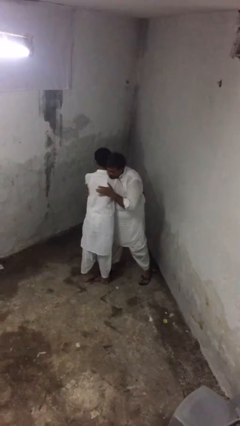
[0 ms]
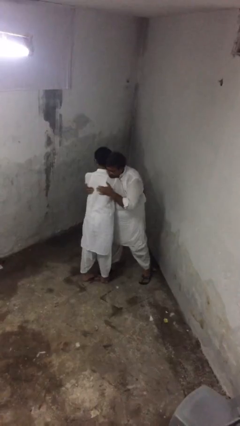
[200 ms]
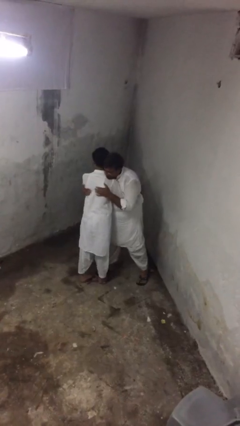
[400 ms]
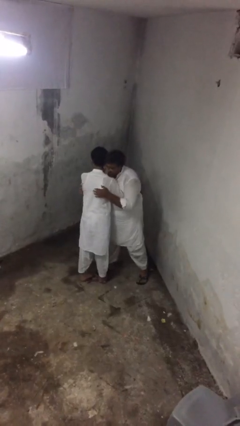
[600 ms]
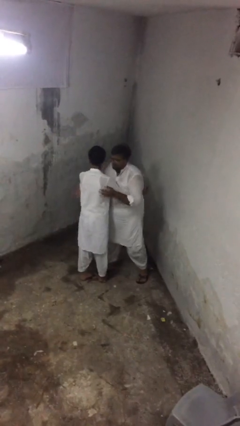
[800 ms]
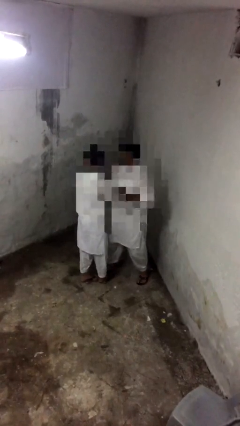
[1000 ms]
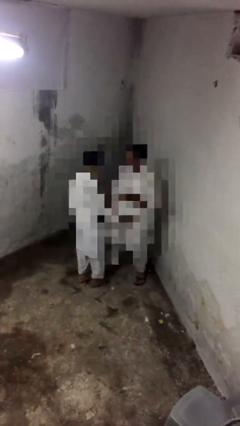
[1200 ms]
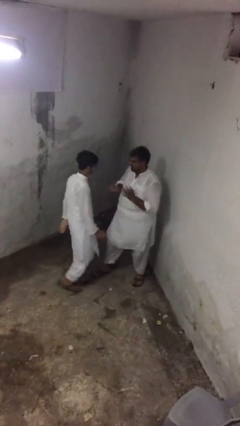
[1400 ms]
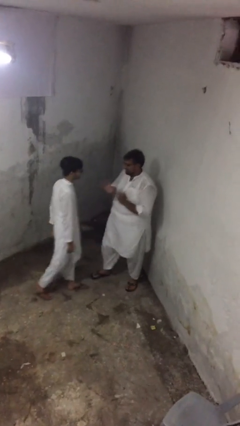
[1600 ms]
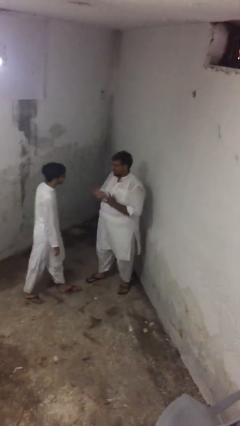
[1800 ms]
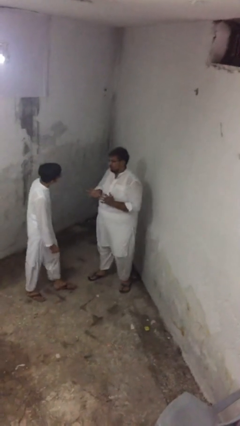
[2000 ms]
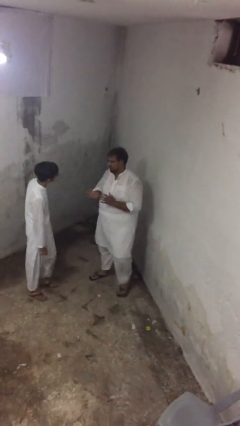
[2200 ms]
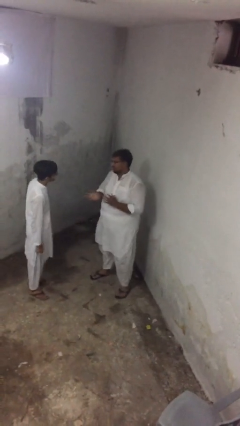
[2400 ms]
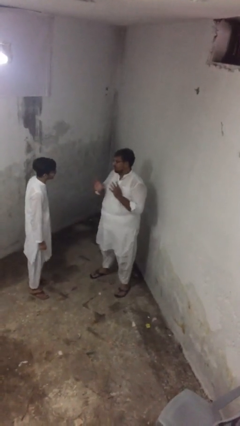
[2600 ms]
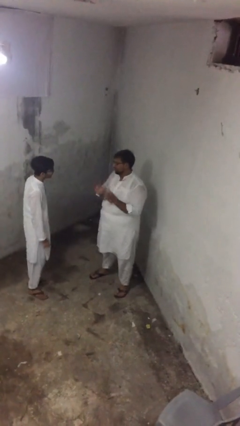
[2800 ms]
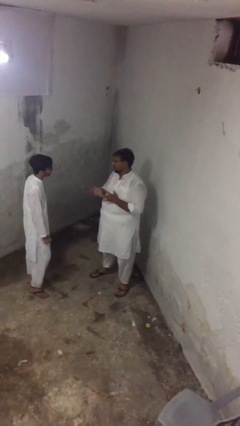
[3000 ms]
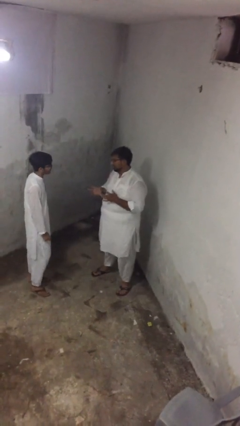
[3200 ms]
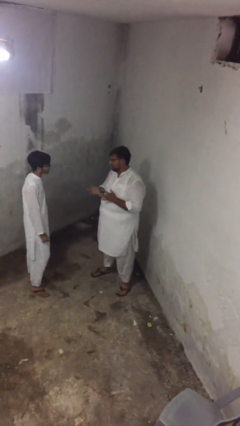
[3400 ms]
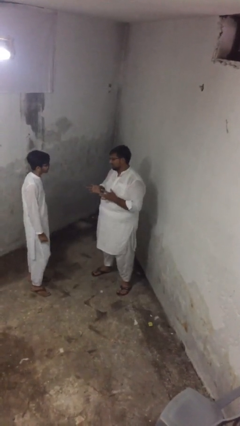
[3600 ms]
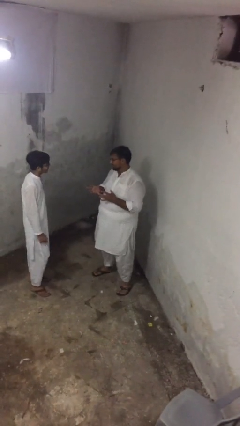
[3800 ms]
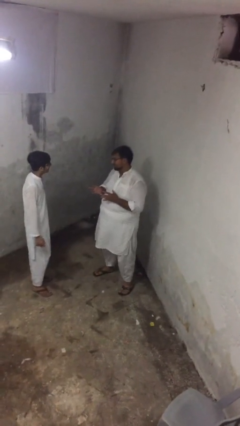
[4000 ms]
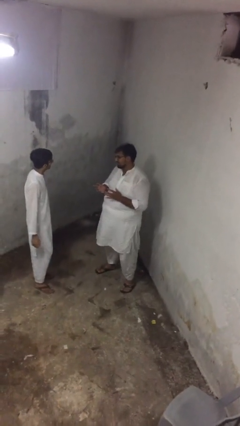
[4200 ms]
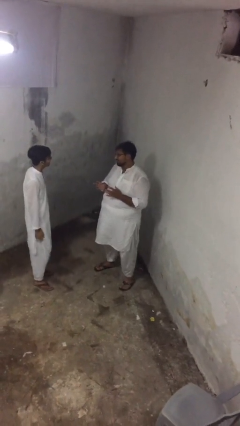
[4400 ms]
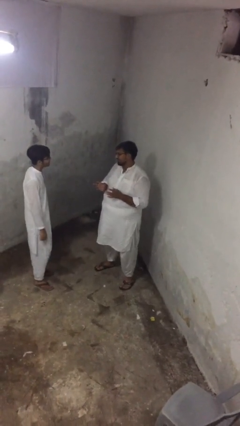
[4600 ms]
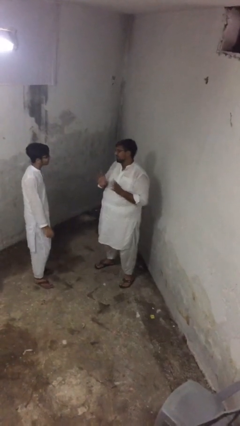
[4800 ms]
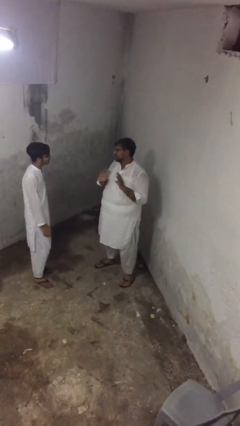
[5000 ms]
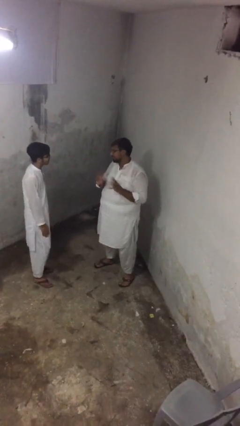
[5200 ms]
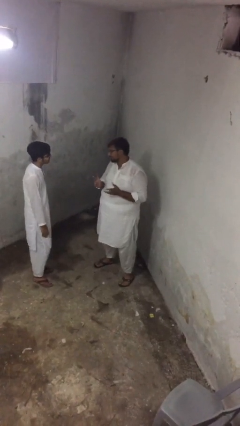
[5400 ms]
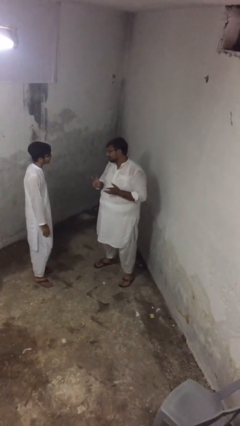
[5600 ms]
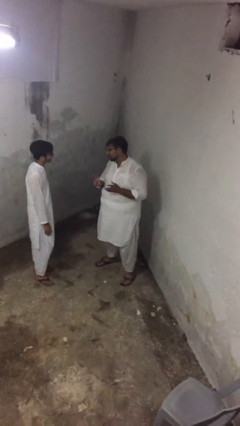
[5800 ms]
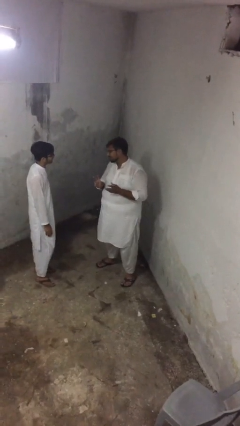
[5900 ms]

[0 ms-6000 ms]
person talks to person

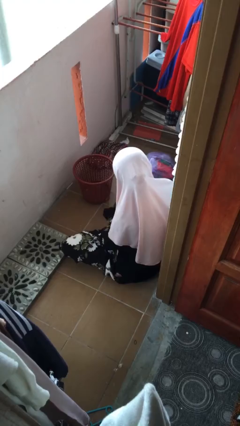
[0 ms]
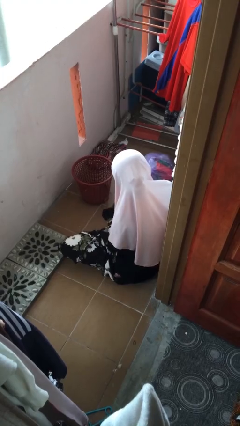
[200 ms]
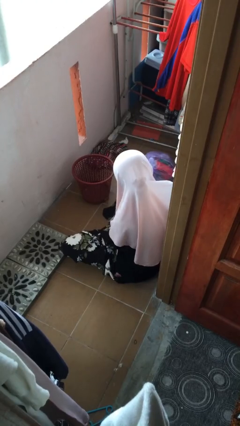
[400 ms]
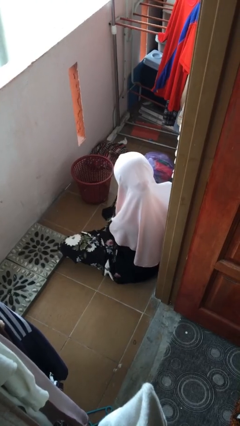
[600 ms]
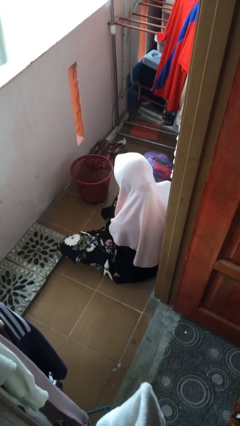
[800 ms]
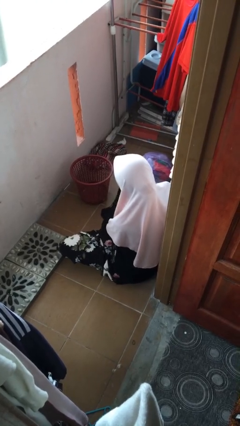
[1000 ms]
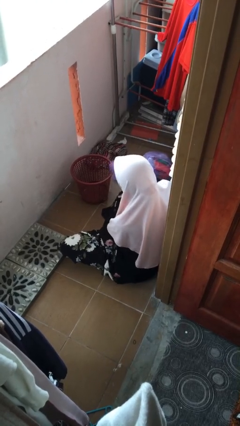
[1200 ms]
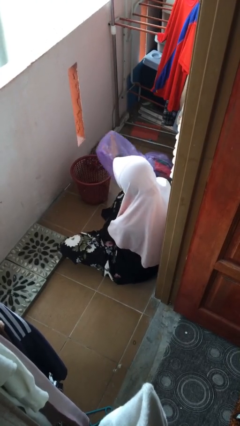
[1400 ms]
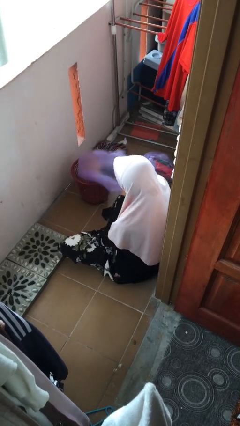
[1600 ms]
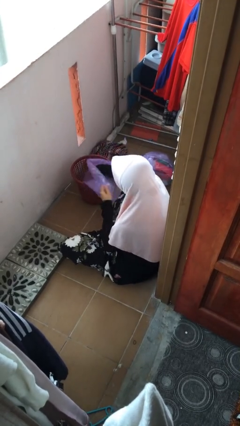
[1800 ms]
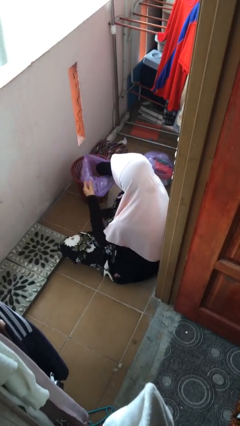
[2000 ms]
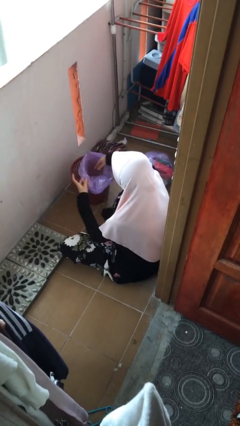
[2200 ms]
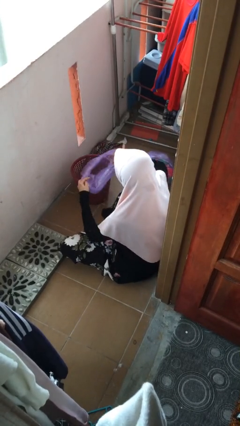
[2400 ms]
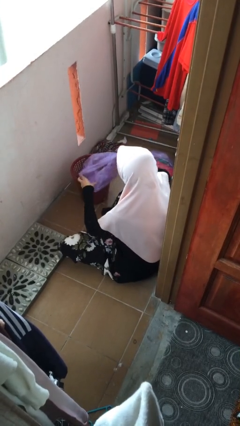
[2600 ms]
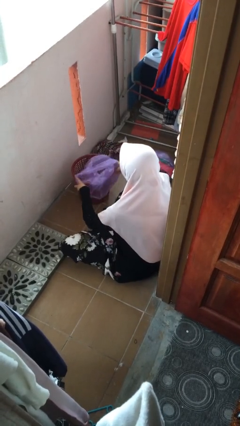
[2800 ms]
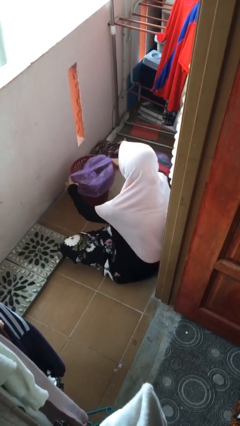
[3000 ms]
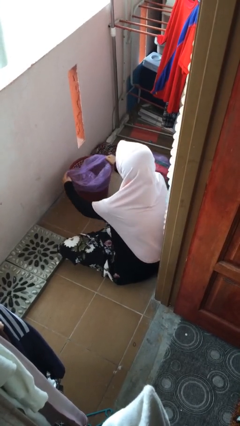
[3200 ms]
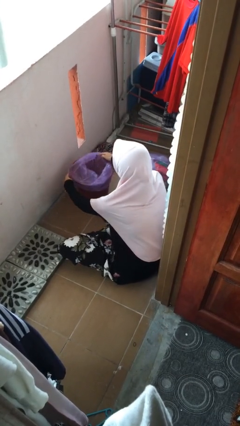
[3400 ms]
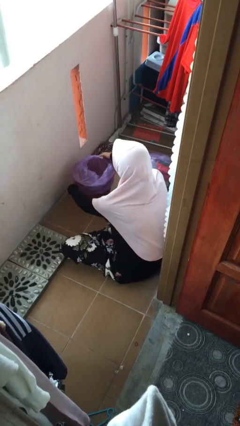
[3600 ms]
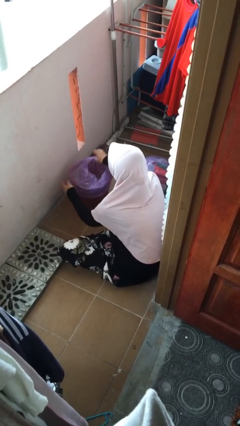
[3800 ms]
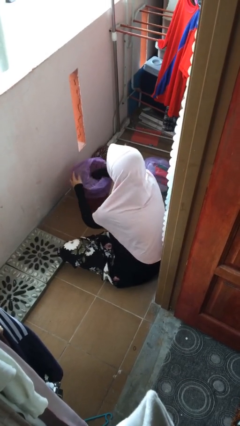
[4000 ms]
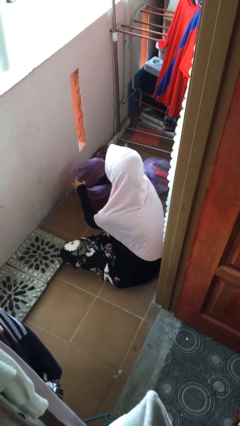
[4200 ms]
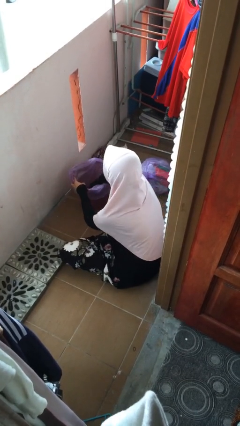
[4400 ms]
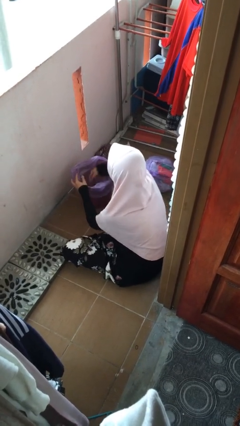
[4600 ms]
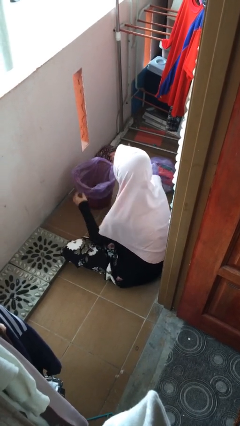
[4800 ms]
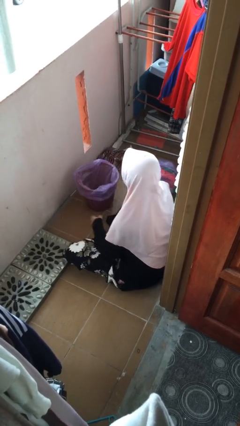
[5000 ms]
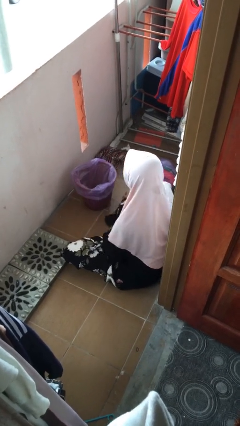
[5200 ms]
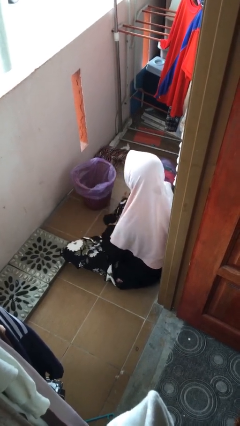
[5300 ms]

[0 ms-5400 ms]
person inserts trashbag into trashcan

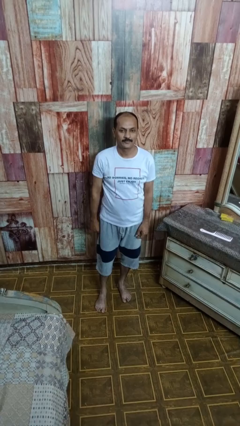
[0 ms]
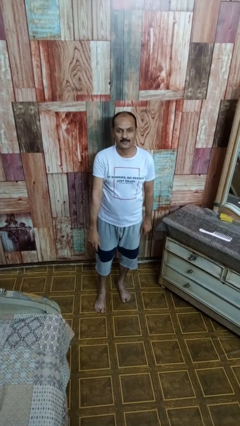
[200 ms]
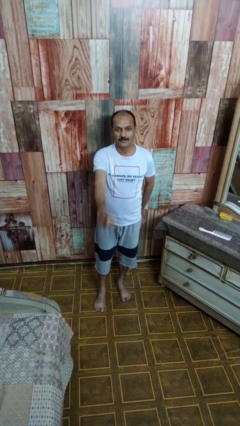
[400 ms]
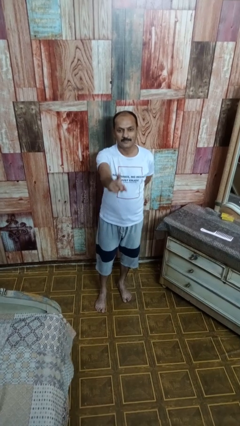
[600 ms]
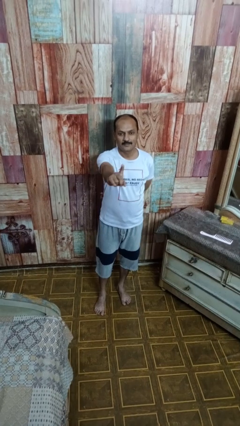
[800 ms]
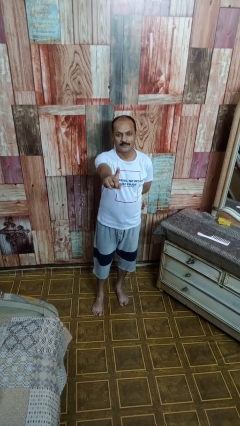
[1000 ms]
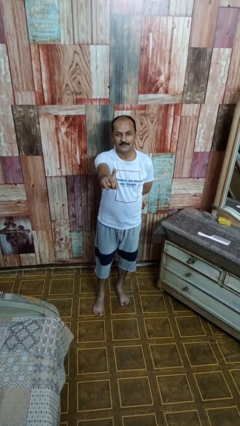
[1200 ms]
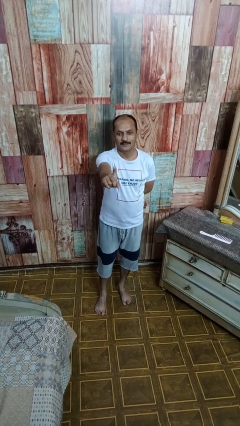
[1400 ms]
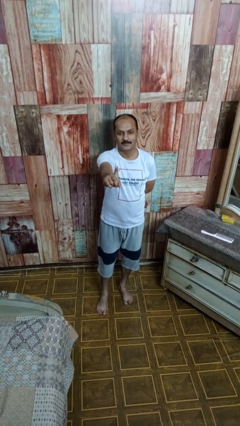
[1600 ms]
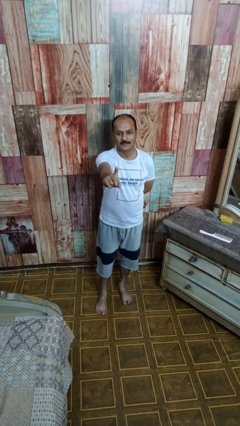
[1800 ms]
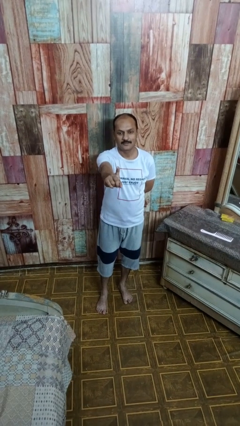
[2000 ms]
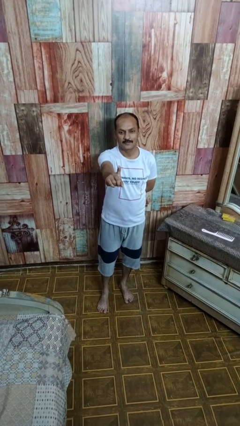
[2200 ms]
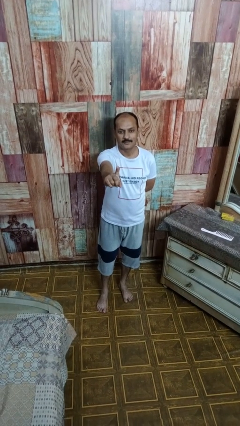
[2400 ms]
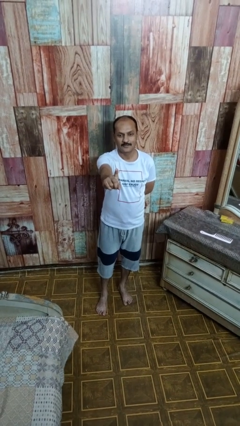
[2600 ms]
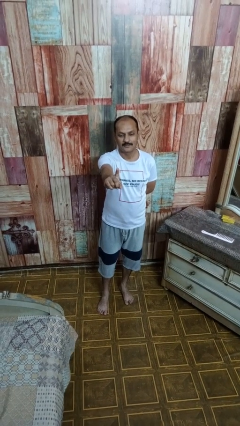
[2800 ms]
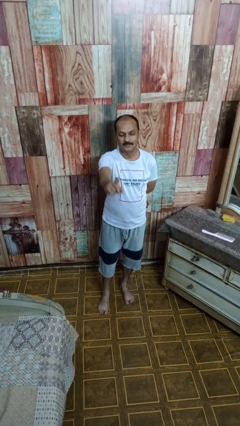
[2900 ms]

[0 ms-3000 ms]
person gestures number one

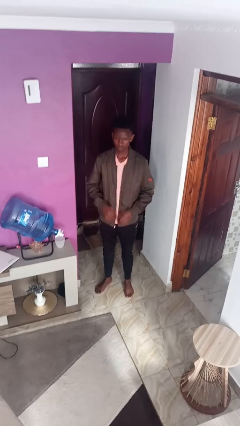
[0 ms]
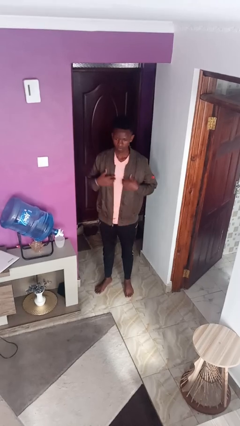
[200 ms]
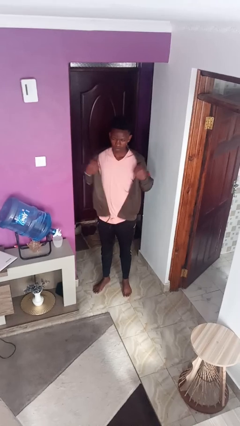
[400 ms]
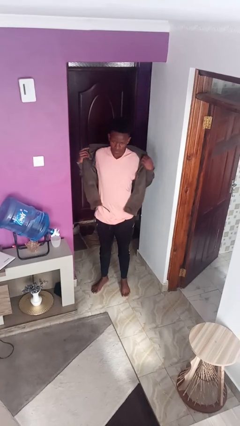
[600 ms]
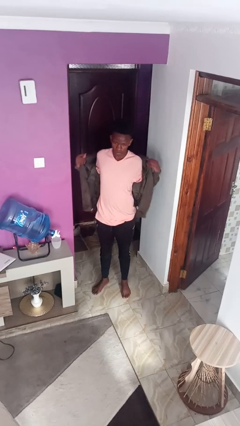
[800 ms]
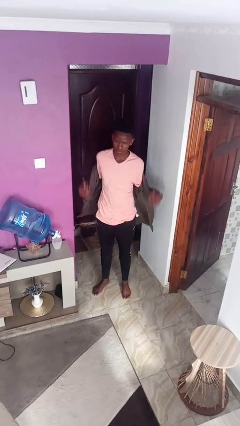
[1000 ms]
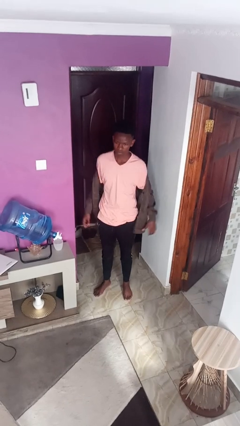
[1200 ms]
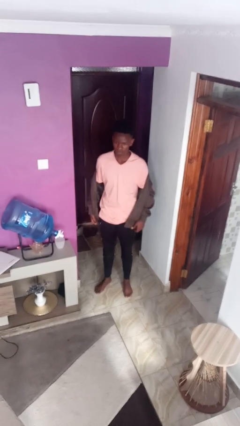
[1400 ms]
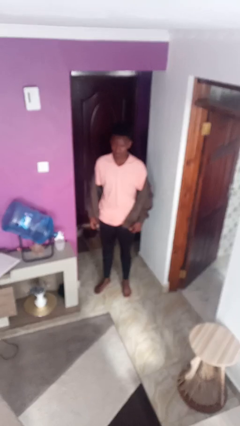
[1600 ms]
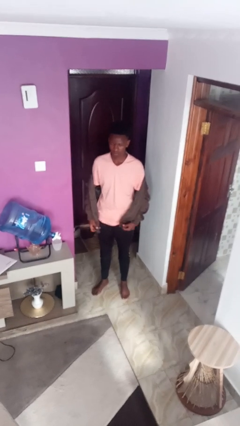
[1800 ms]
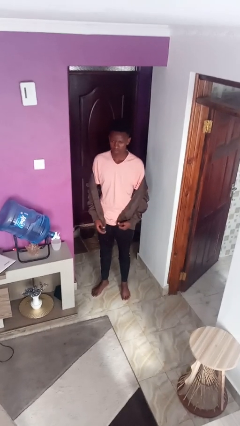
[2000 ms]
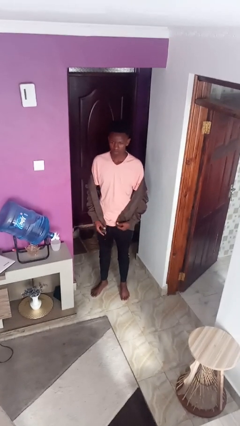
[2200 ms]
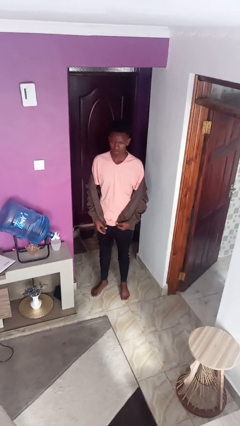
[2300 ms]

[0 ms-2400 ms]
person takes off jacket

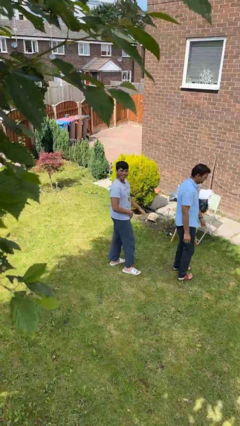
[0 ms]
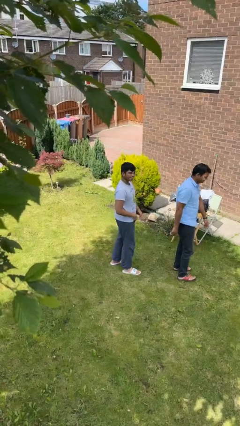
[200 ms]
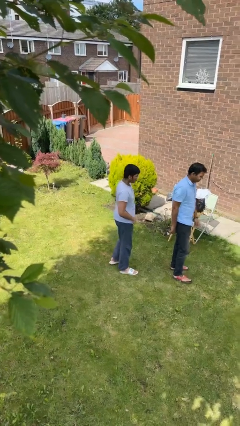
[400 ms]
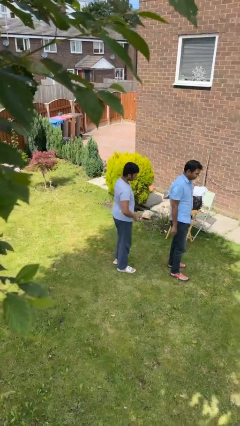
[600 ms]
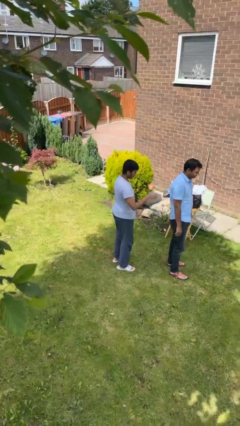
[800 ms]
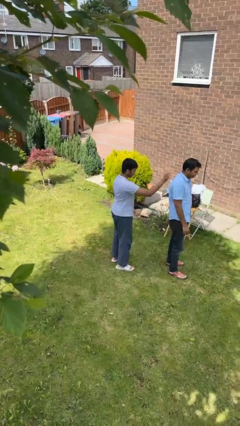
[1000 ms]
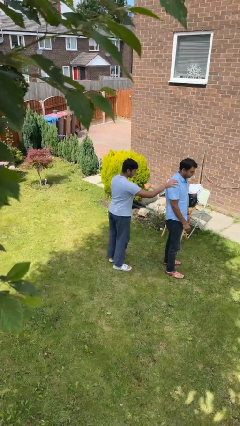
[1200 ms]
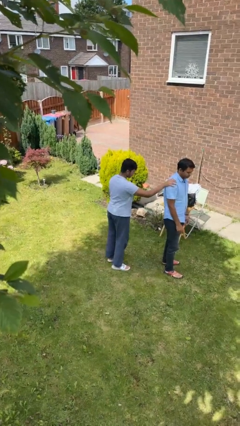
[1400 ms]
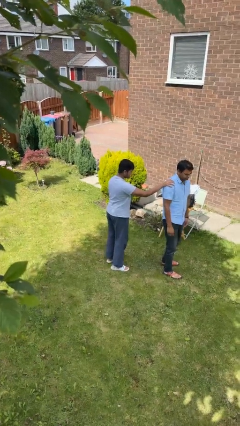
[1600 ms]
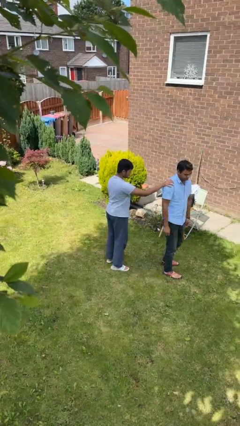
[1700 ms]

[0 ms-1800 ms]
person grabs person by shoulder
